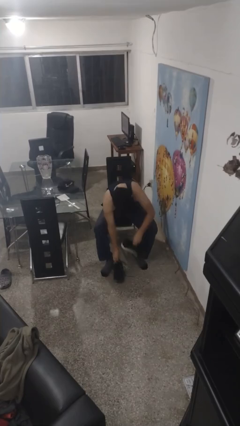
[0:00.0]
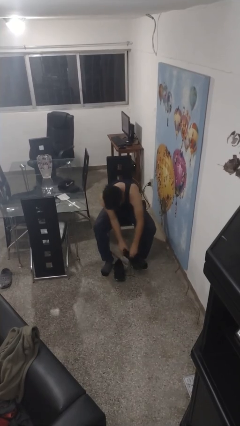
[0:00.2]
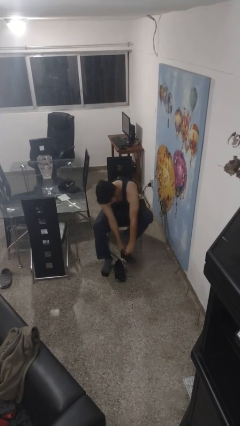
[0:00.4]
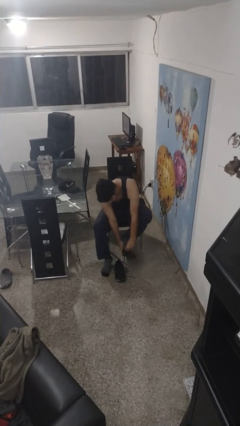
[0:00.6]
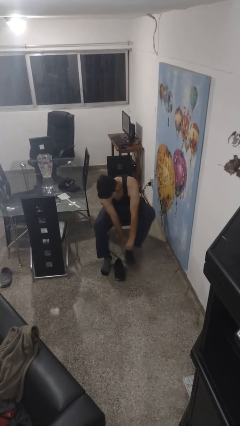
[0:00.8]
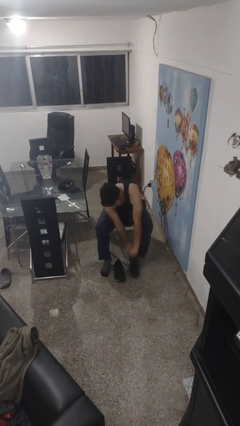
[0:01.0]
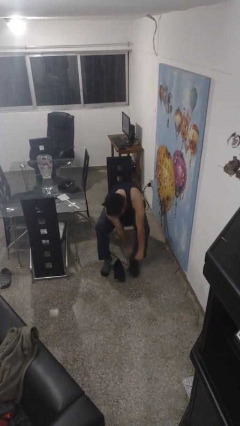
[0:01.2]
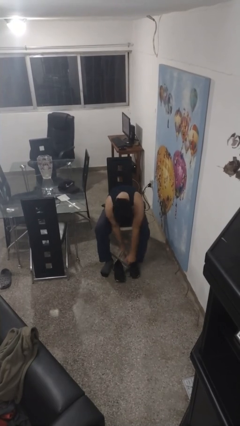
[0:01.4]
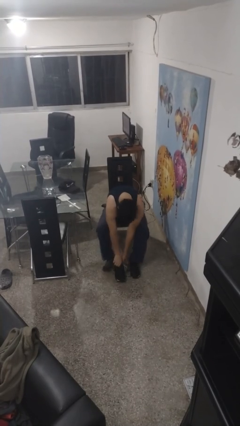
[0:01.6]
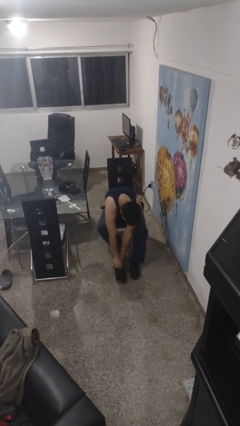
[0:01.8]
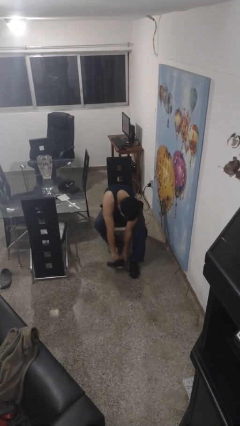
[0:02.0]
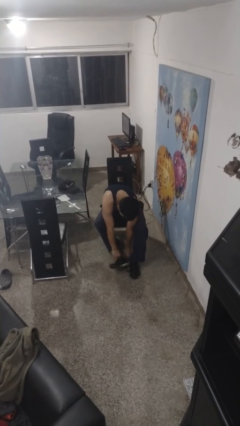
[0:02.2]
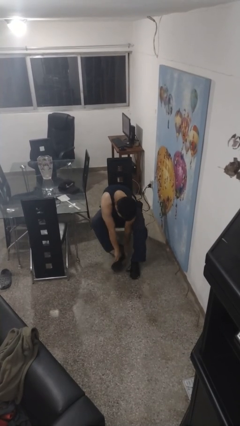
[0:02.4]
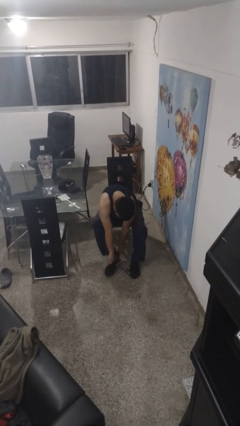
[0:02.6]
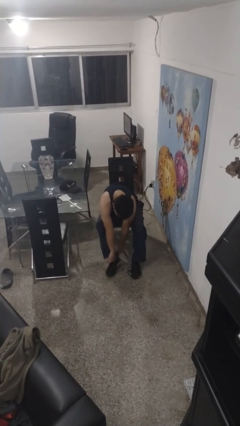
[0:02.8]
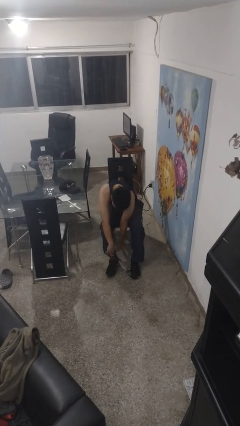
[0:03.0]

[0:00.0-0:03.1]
person puts on shoes

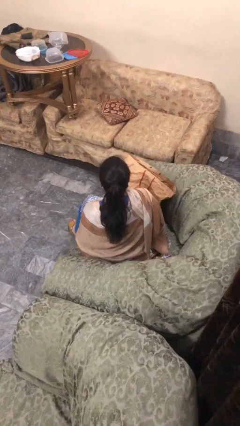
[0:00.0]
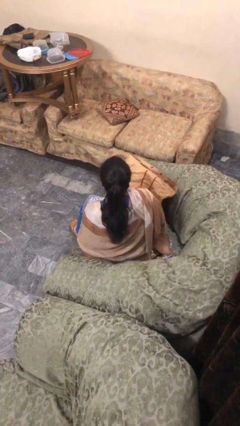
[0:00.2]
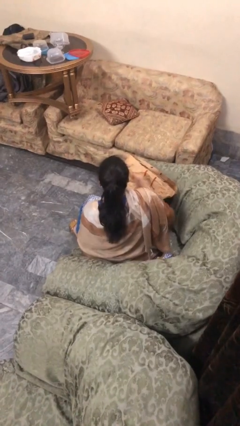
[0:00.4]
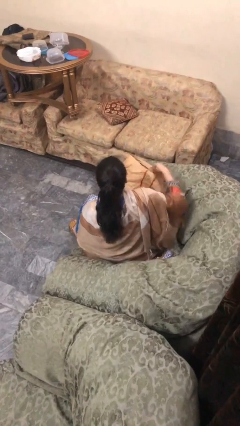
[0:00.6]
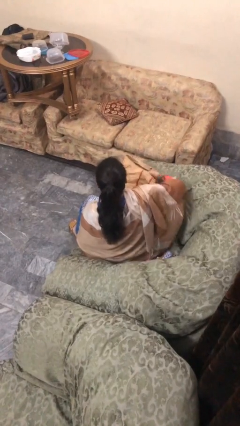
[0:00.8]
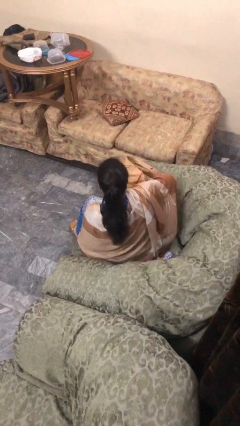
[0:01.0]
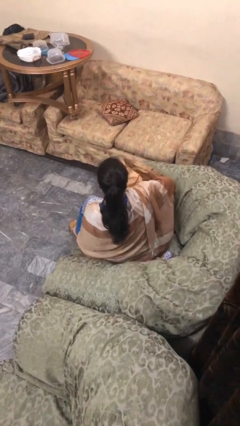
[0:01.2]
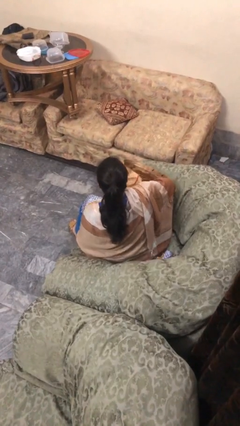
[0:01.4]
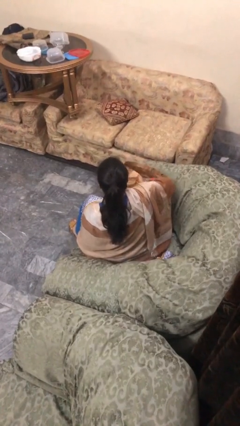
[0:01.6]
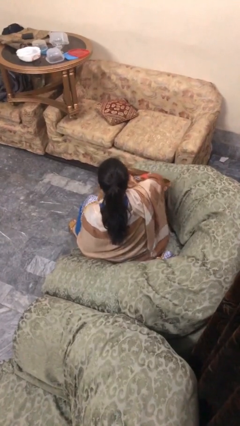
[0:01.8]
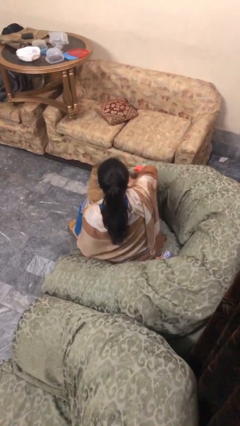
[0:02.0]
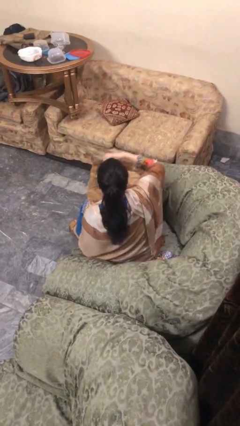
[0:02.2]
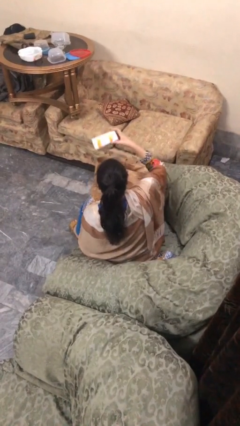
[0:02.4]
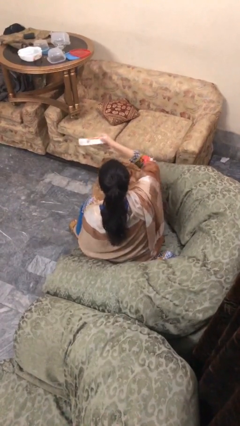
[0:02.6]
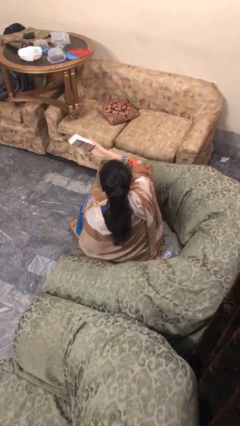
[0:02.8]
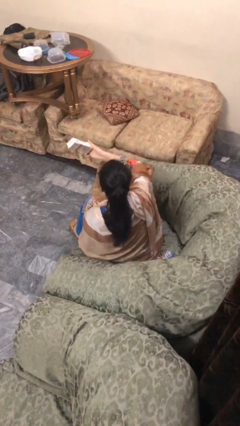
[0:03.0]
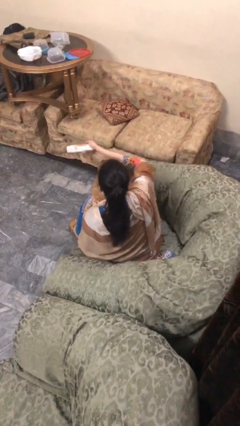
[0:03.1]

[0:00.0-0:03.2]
person takes object from bag

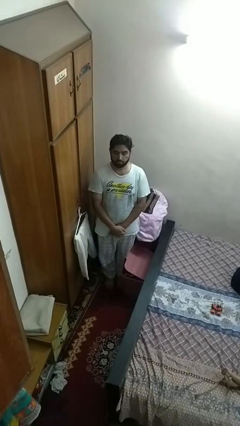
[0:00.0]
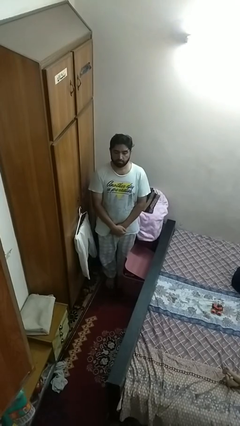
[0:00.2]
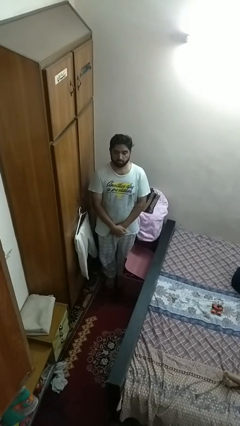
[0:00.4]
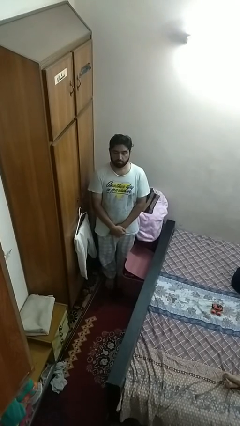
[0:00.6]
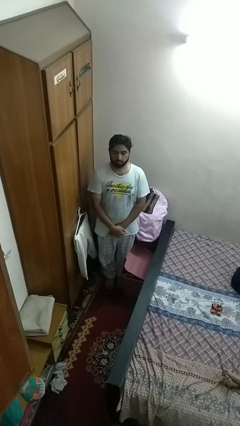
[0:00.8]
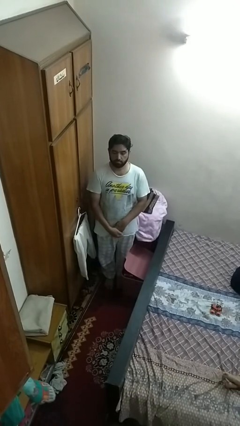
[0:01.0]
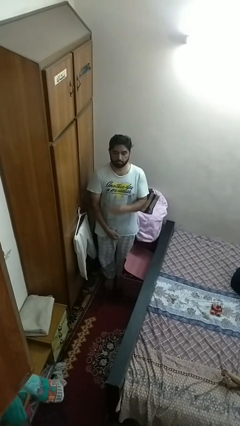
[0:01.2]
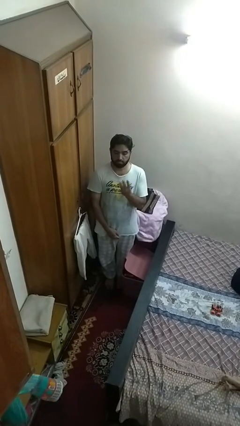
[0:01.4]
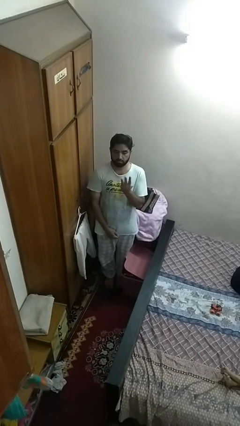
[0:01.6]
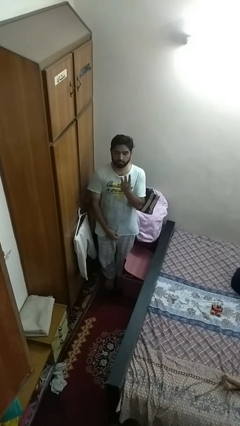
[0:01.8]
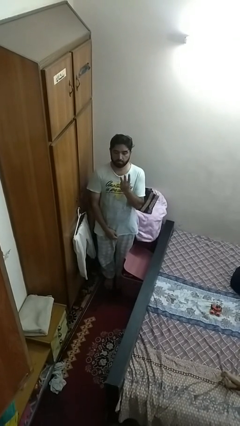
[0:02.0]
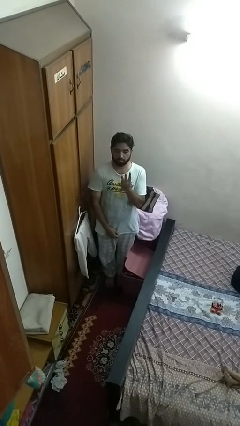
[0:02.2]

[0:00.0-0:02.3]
person gestures number three

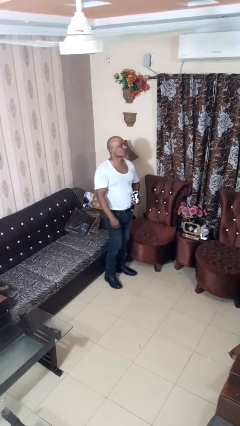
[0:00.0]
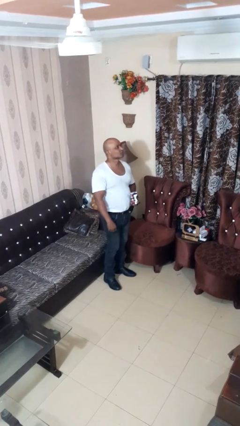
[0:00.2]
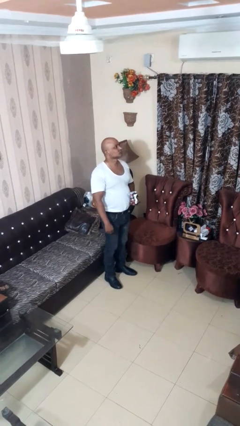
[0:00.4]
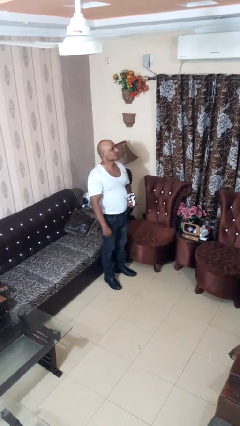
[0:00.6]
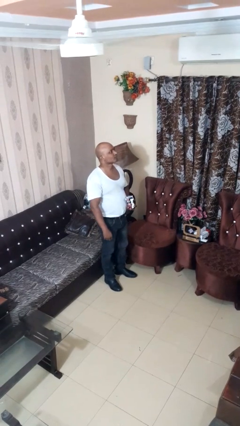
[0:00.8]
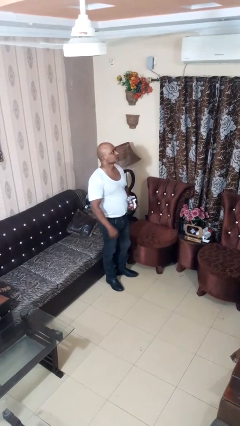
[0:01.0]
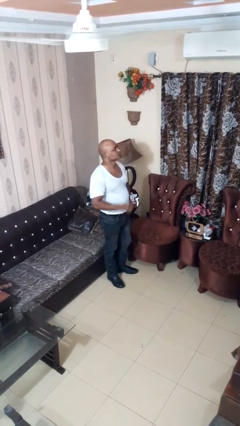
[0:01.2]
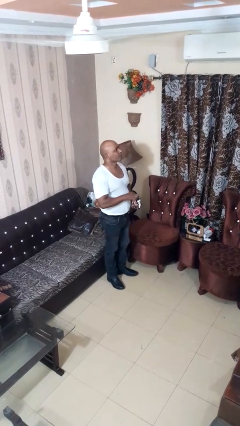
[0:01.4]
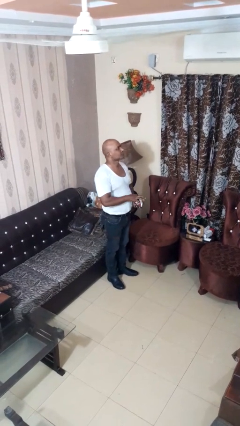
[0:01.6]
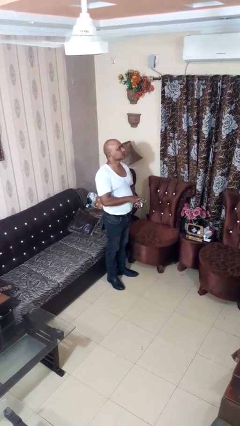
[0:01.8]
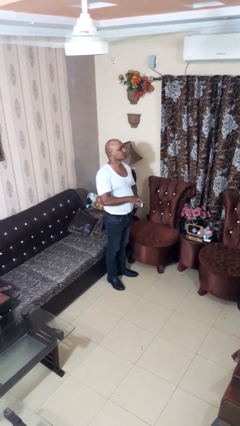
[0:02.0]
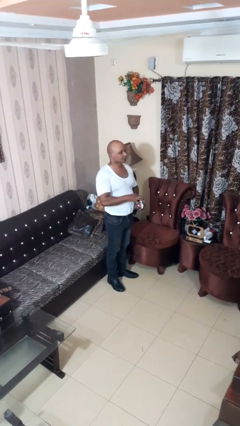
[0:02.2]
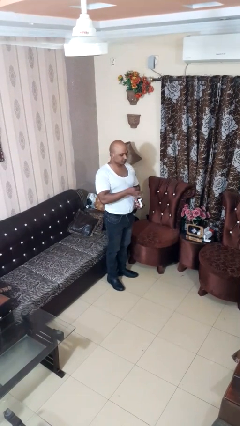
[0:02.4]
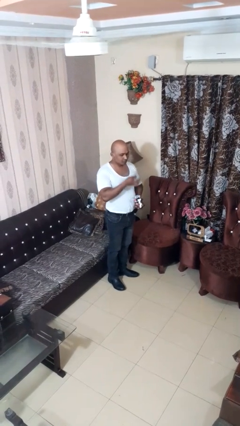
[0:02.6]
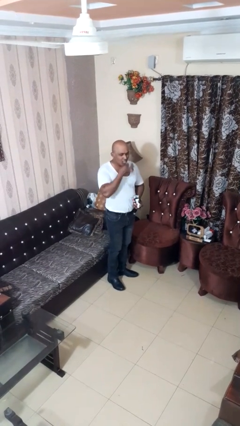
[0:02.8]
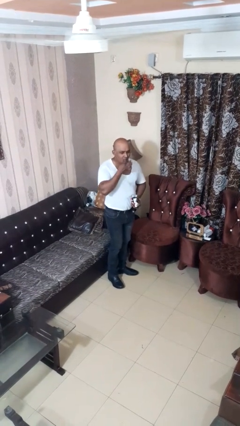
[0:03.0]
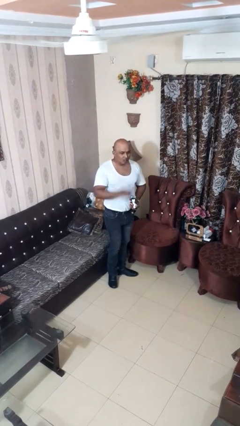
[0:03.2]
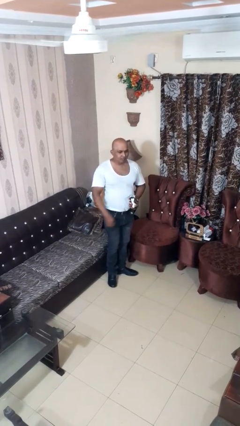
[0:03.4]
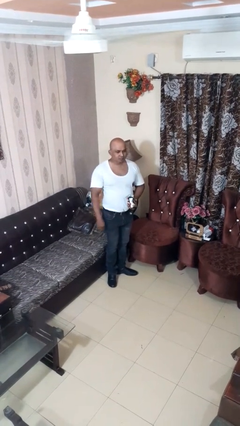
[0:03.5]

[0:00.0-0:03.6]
person eats snack from bag

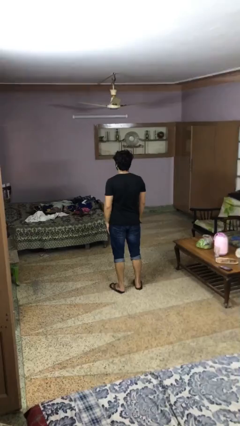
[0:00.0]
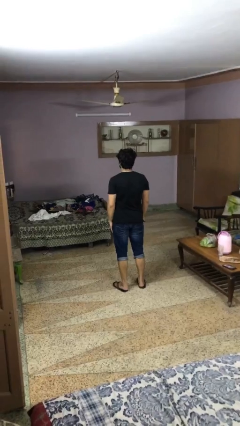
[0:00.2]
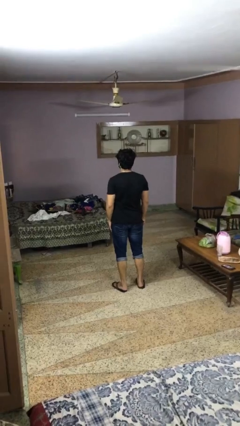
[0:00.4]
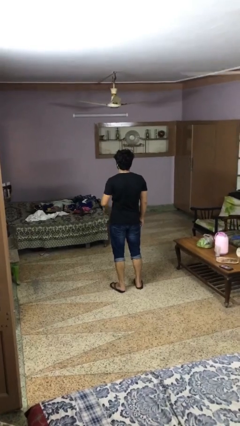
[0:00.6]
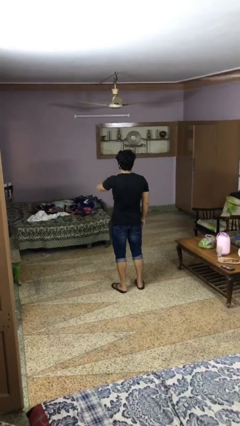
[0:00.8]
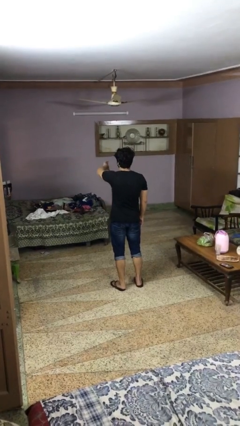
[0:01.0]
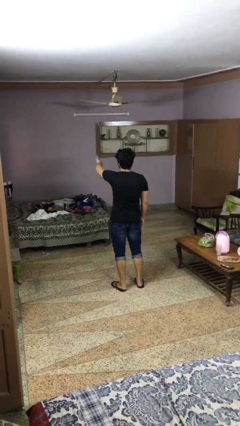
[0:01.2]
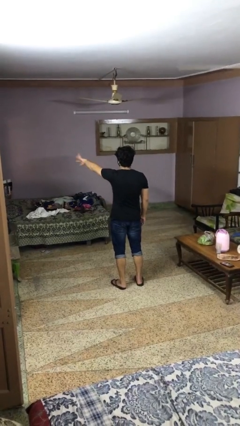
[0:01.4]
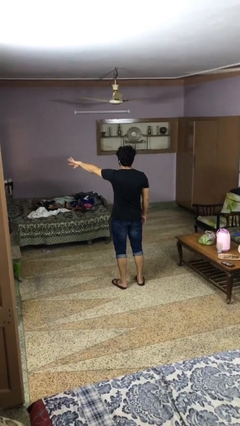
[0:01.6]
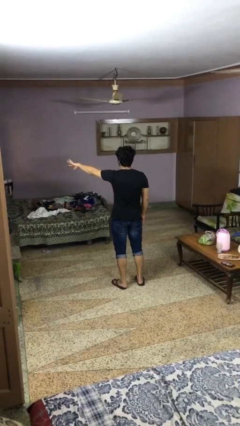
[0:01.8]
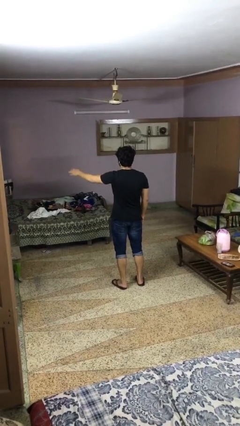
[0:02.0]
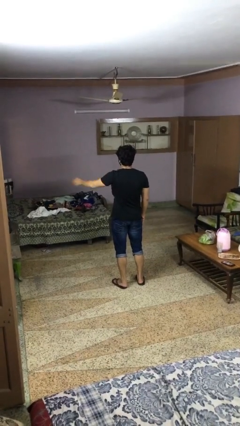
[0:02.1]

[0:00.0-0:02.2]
person gestures swipe left

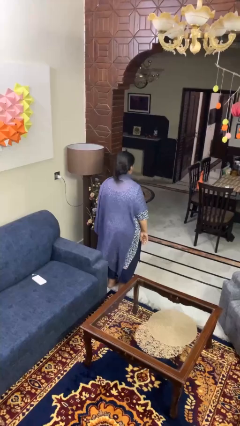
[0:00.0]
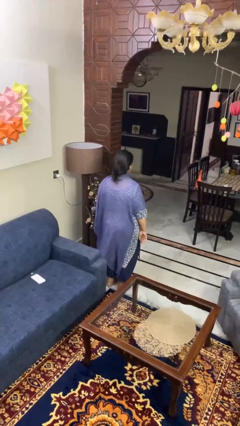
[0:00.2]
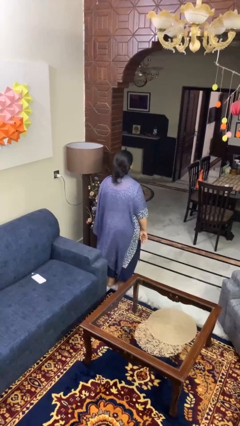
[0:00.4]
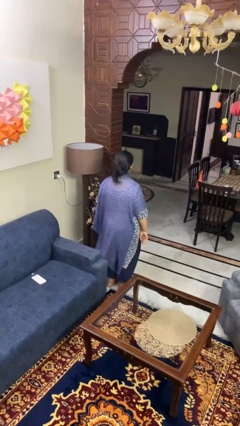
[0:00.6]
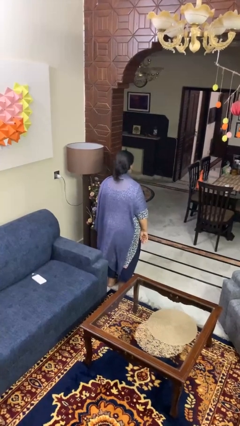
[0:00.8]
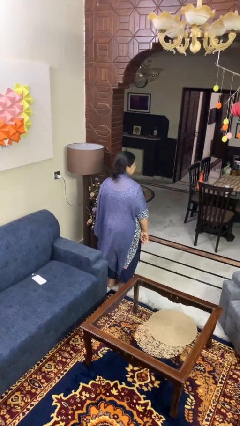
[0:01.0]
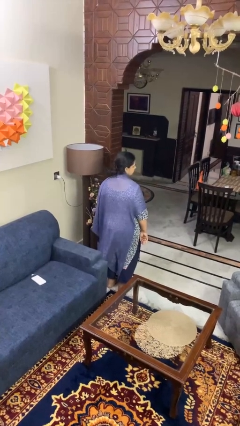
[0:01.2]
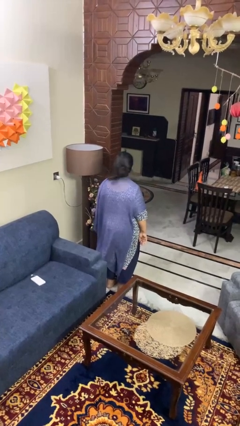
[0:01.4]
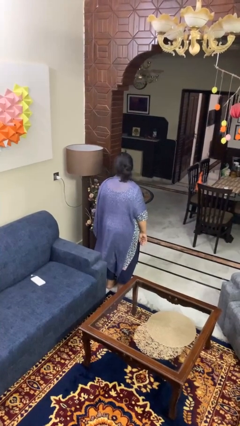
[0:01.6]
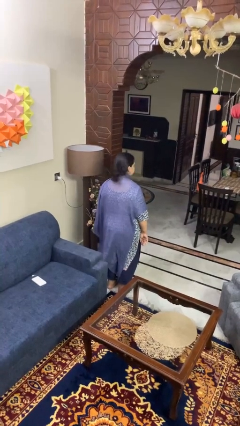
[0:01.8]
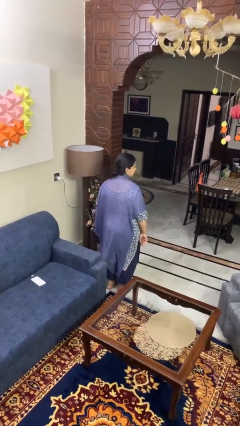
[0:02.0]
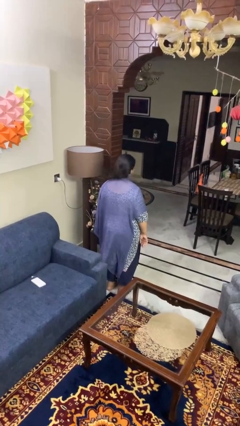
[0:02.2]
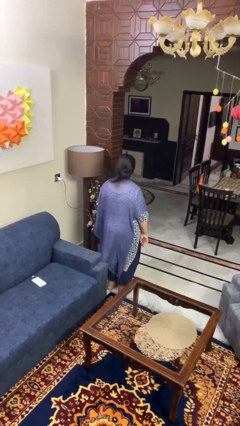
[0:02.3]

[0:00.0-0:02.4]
person shakes head

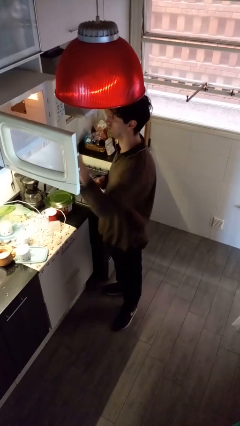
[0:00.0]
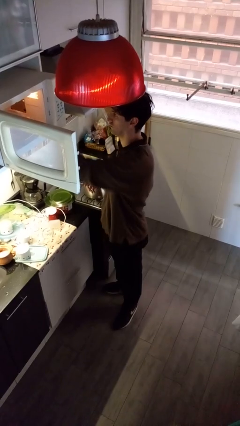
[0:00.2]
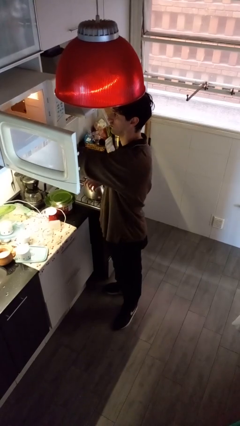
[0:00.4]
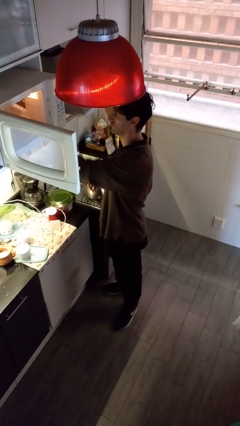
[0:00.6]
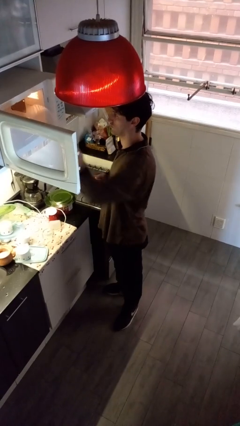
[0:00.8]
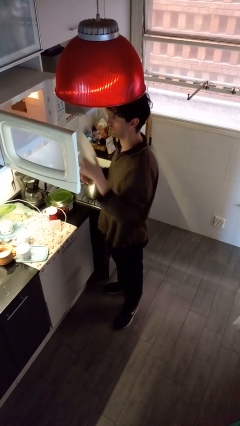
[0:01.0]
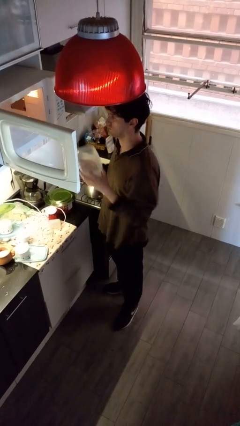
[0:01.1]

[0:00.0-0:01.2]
person takes object from microwave
